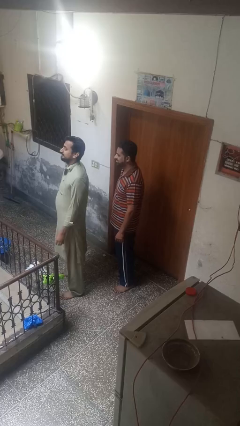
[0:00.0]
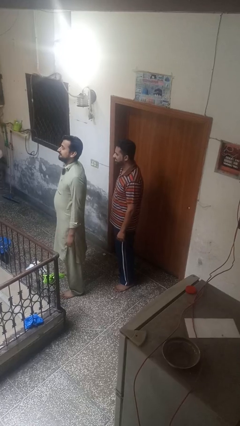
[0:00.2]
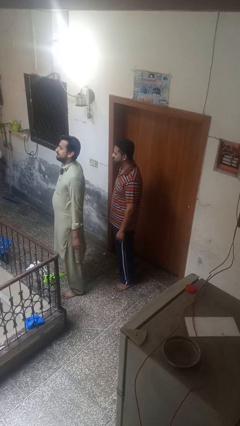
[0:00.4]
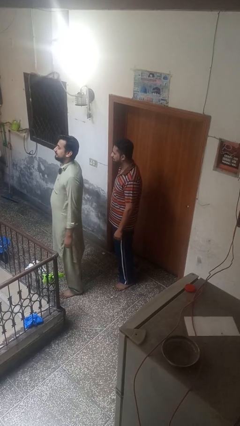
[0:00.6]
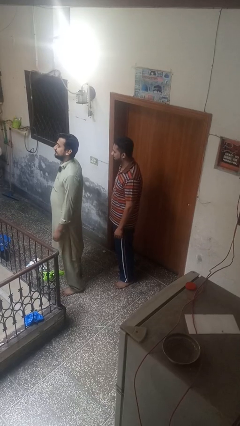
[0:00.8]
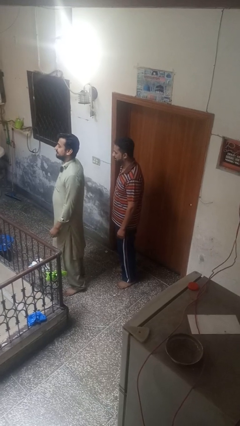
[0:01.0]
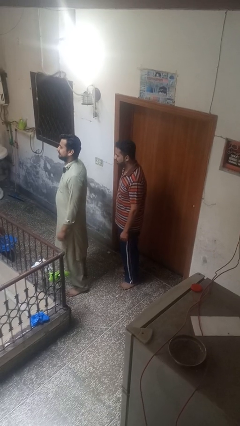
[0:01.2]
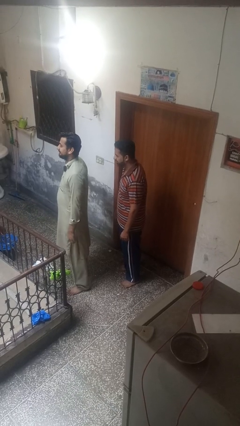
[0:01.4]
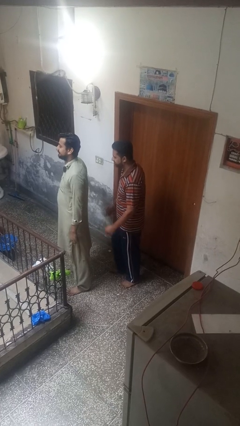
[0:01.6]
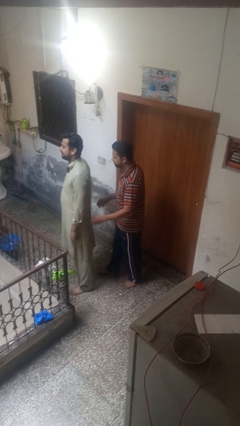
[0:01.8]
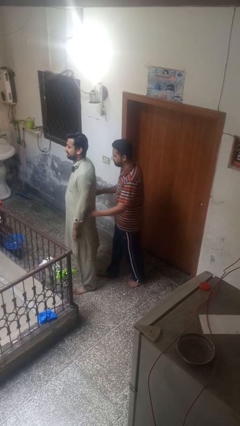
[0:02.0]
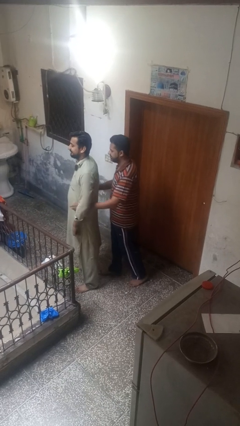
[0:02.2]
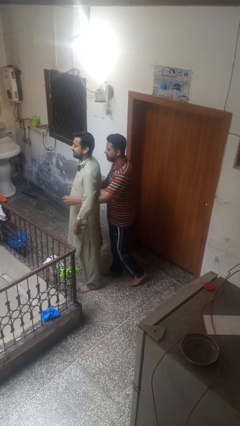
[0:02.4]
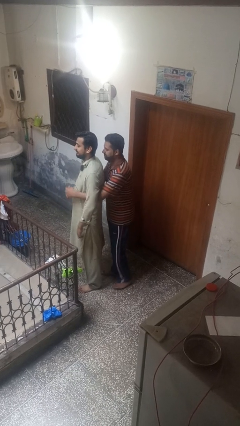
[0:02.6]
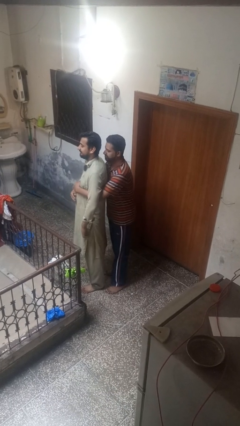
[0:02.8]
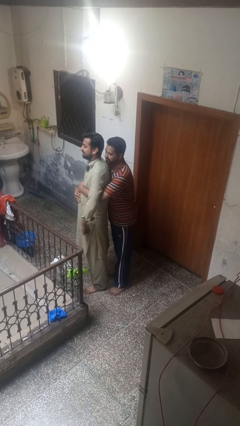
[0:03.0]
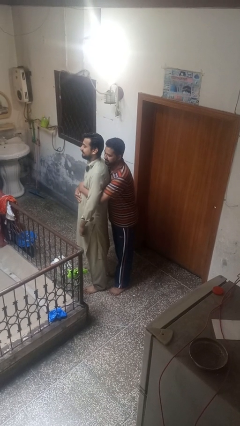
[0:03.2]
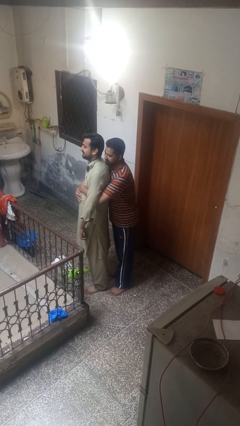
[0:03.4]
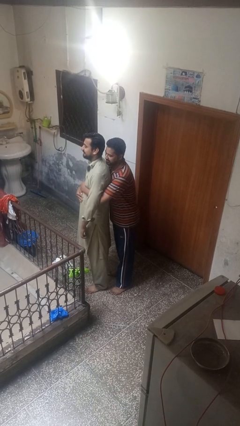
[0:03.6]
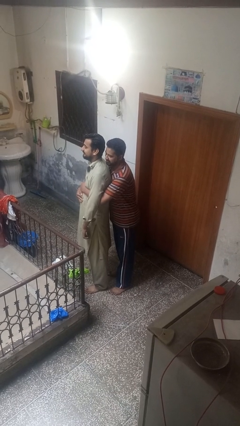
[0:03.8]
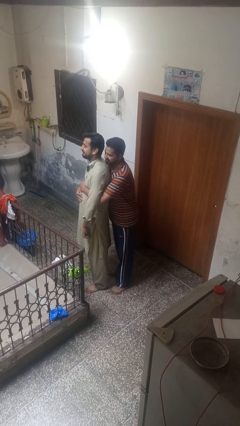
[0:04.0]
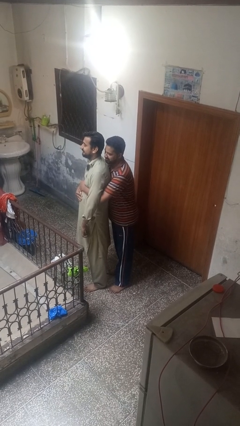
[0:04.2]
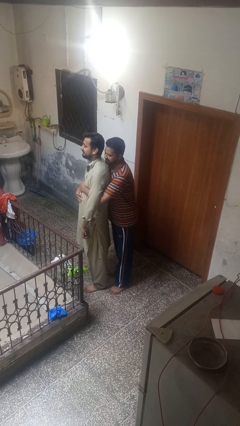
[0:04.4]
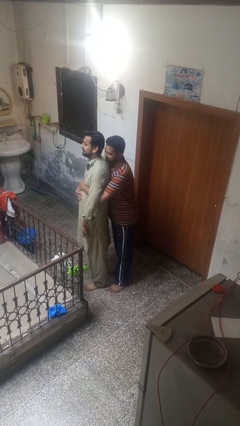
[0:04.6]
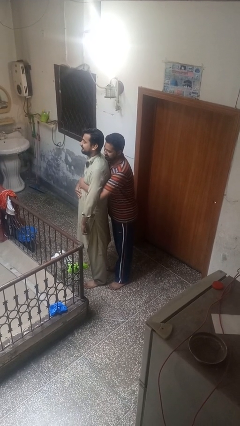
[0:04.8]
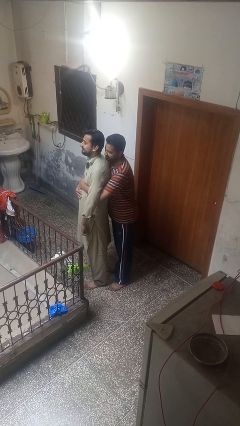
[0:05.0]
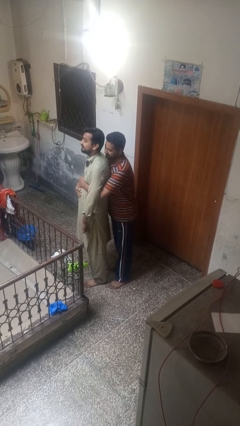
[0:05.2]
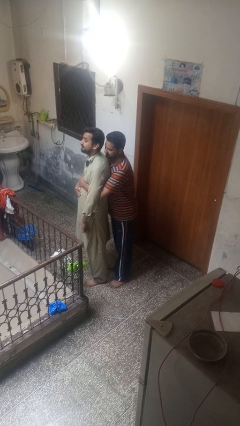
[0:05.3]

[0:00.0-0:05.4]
person hugs person from behind

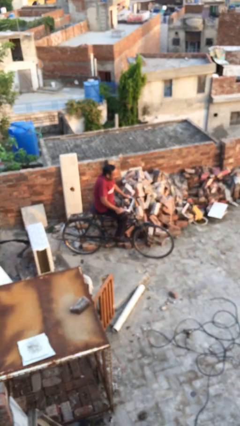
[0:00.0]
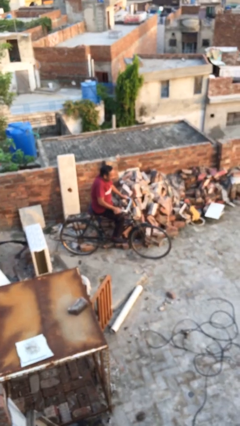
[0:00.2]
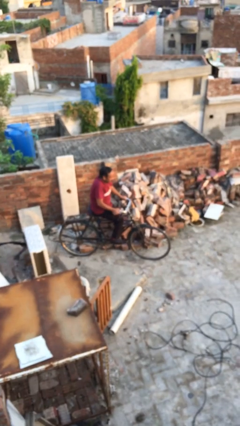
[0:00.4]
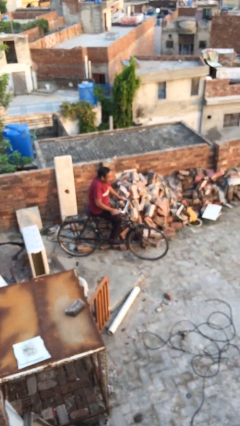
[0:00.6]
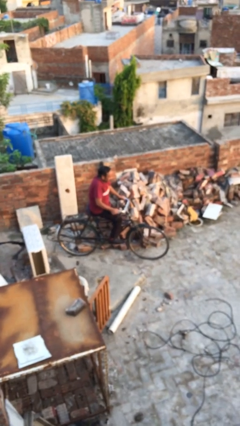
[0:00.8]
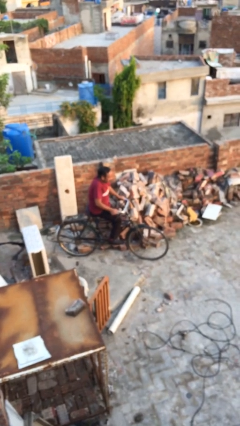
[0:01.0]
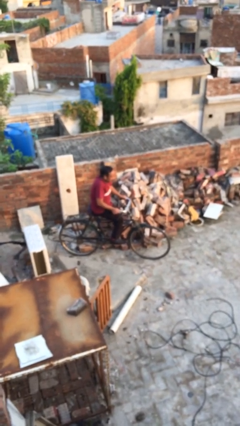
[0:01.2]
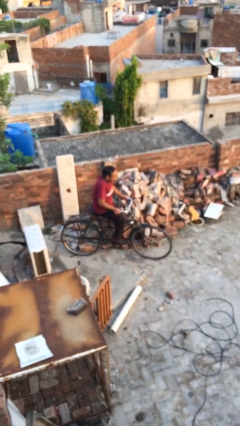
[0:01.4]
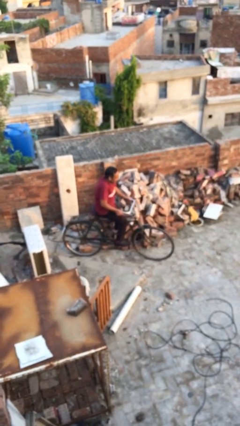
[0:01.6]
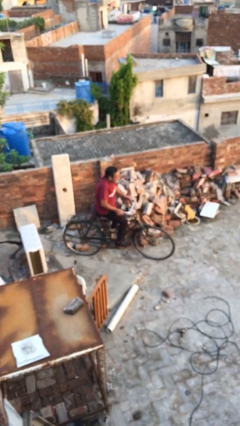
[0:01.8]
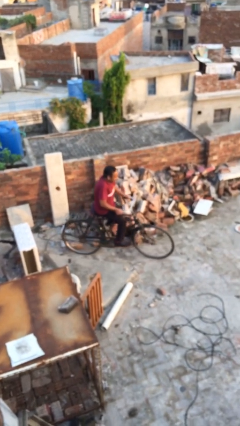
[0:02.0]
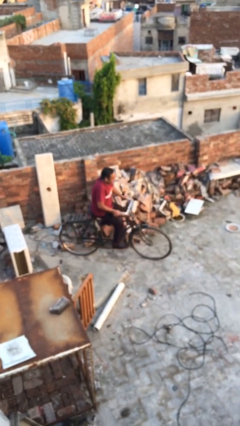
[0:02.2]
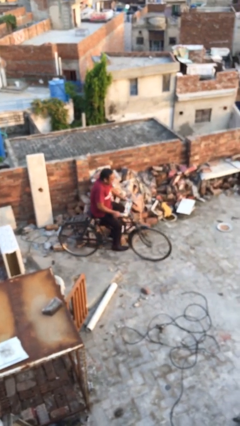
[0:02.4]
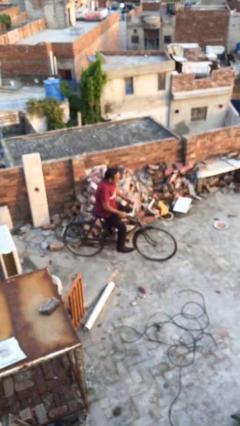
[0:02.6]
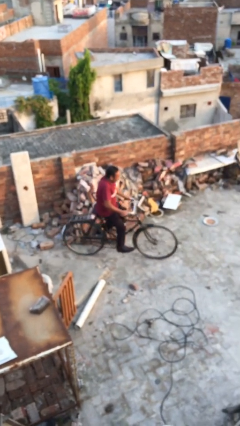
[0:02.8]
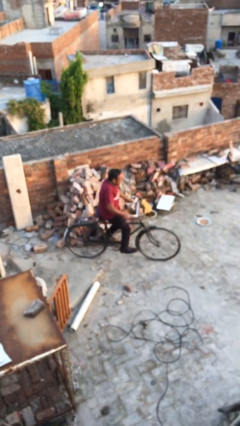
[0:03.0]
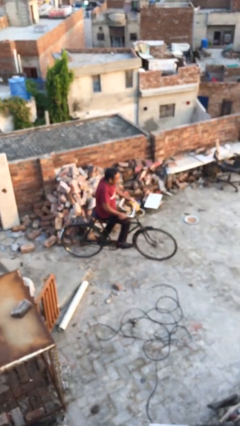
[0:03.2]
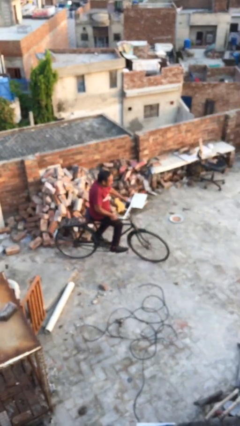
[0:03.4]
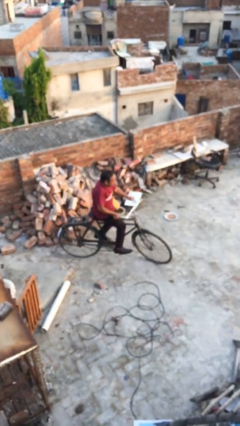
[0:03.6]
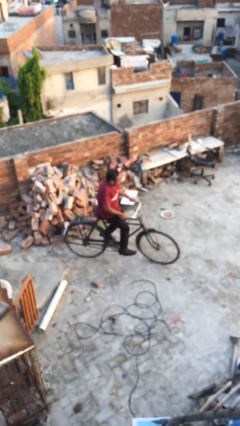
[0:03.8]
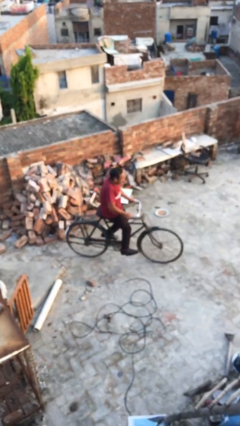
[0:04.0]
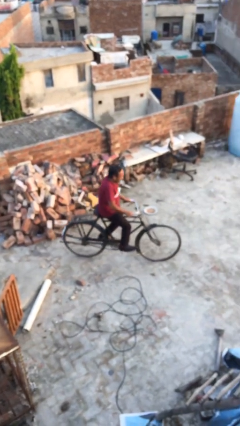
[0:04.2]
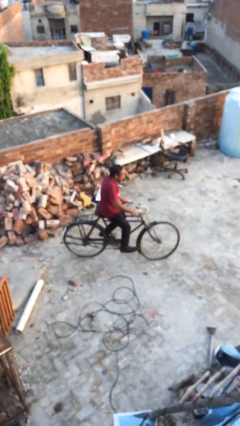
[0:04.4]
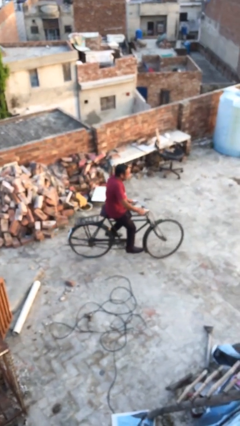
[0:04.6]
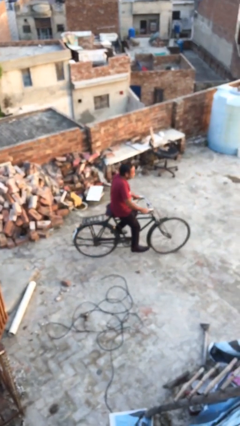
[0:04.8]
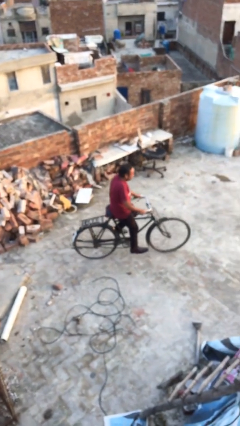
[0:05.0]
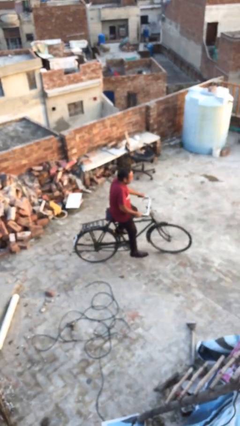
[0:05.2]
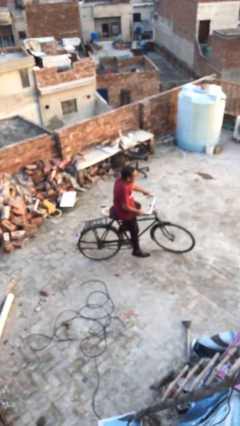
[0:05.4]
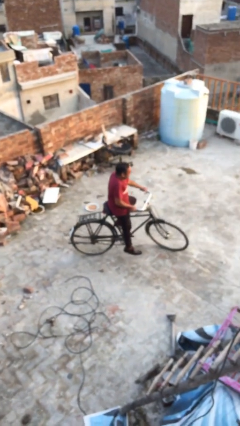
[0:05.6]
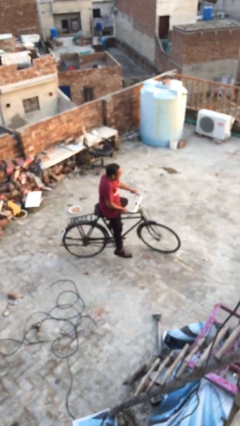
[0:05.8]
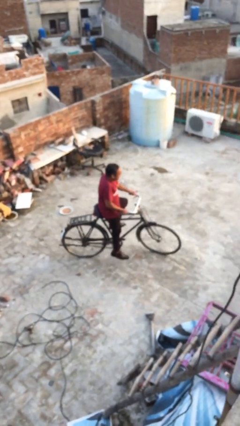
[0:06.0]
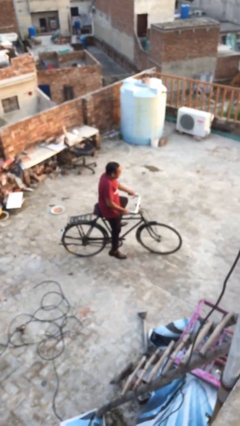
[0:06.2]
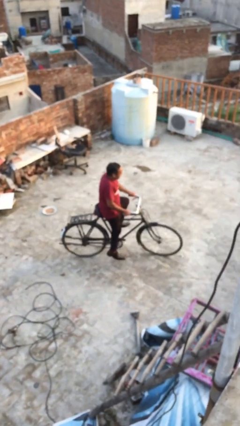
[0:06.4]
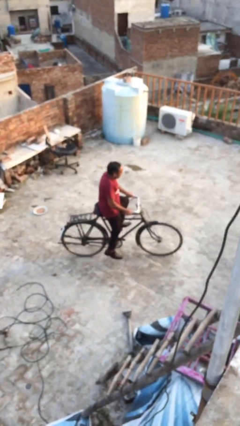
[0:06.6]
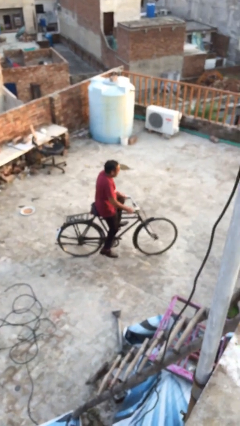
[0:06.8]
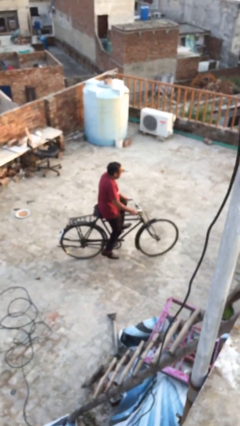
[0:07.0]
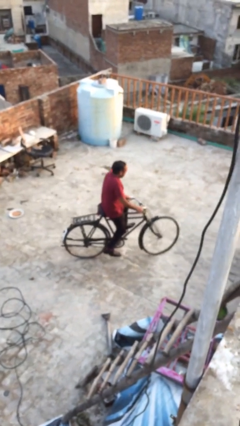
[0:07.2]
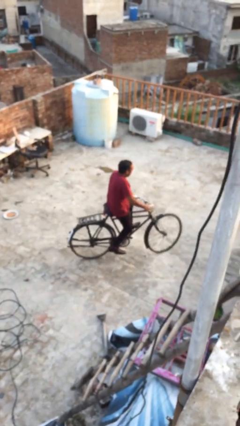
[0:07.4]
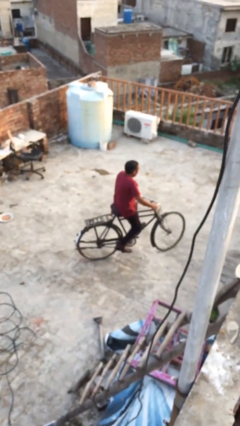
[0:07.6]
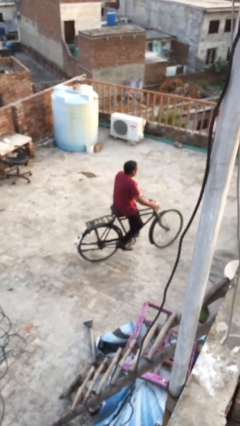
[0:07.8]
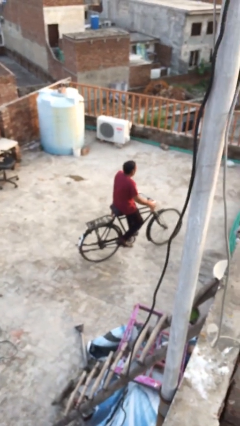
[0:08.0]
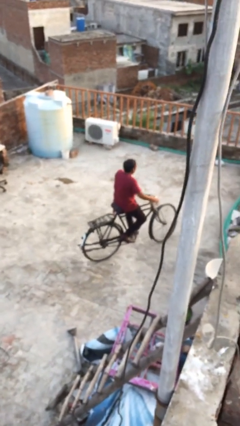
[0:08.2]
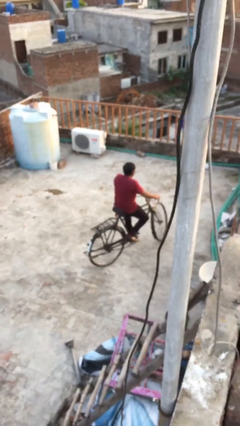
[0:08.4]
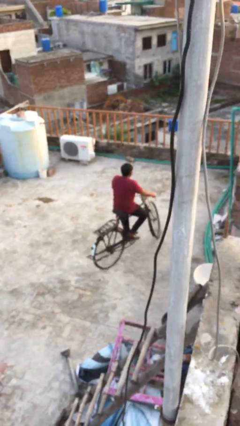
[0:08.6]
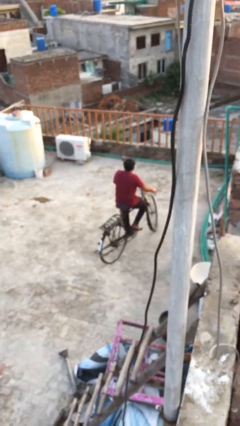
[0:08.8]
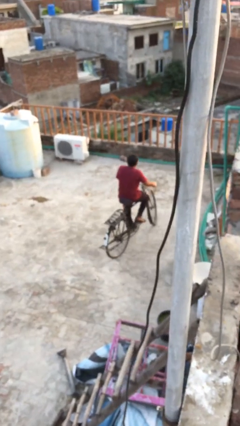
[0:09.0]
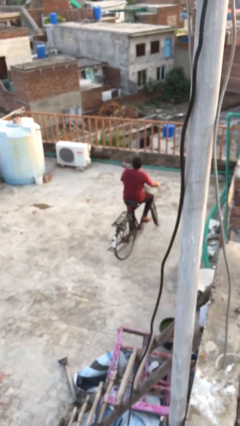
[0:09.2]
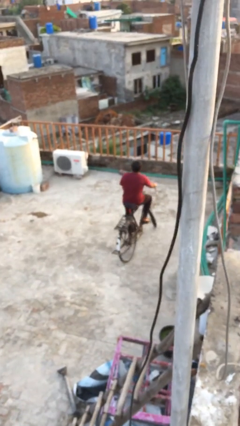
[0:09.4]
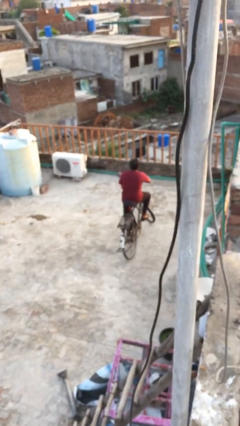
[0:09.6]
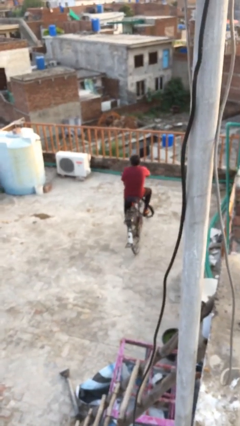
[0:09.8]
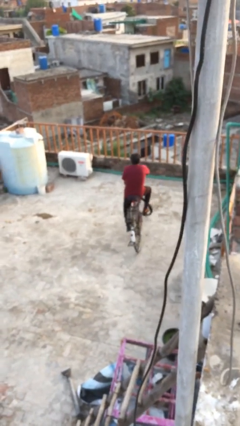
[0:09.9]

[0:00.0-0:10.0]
person rides bicycle

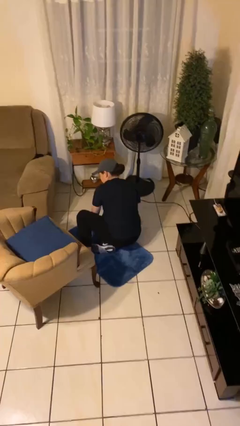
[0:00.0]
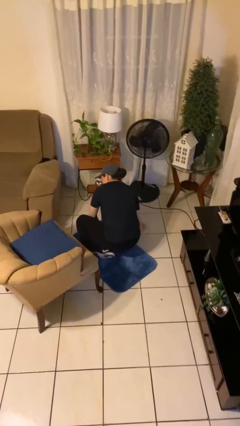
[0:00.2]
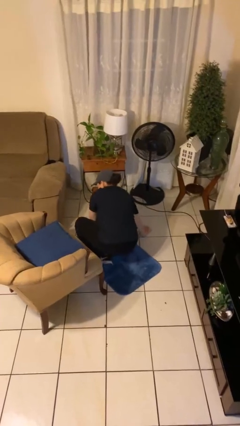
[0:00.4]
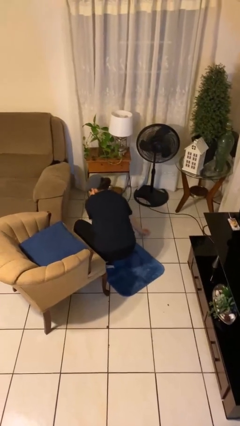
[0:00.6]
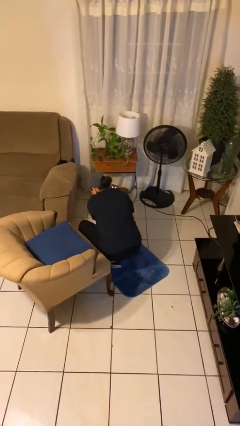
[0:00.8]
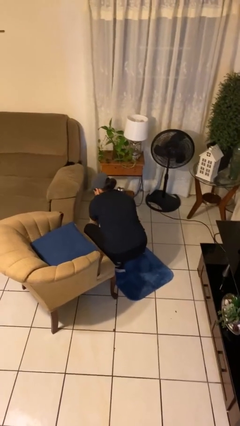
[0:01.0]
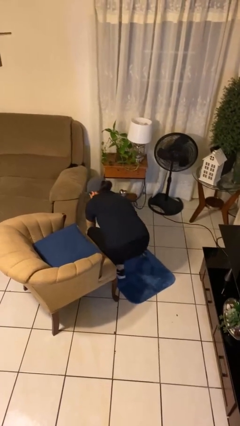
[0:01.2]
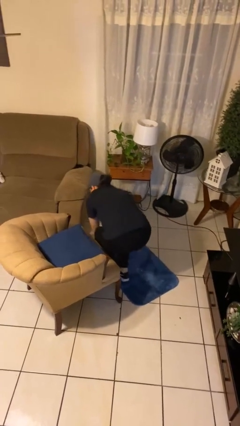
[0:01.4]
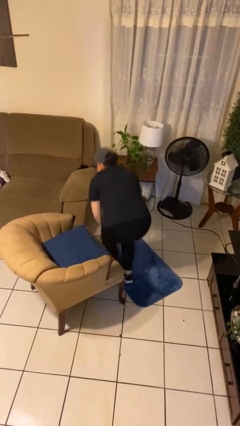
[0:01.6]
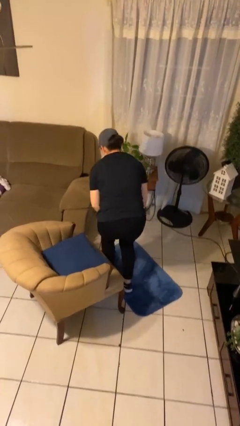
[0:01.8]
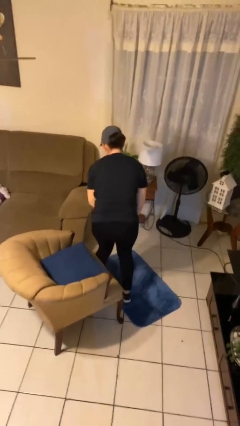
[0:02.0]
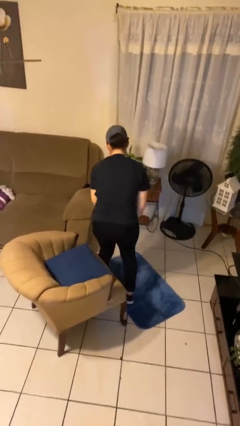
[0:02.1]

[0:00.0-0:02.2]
person stands up from floor

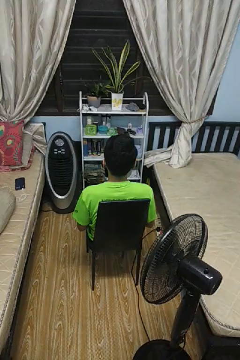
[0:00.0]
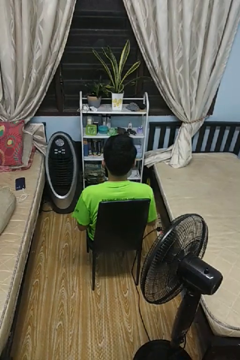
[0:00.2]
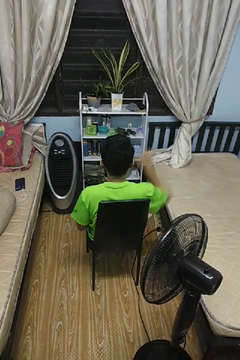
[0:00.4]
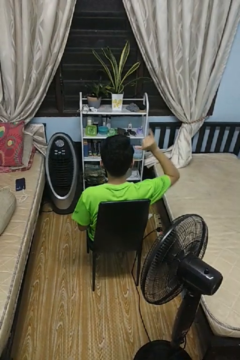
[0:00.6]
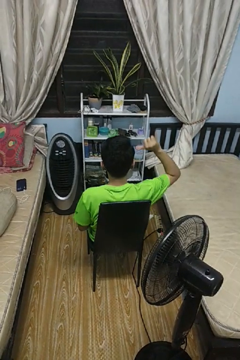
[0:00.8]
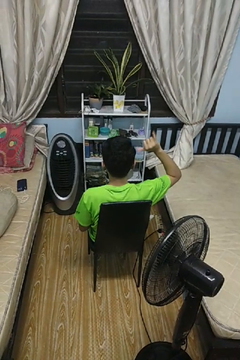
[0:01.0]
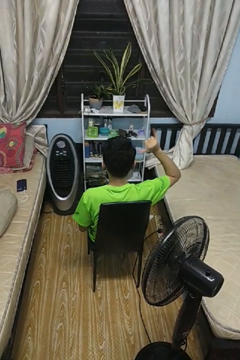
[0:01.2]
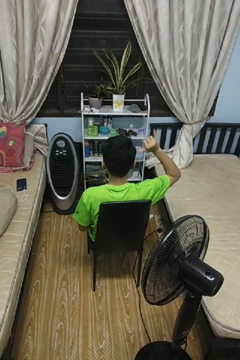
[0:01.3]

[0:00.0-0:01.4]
person gestures hang loose
